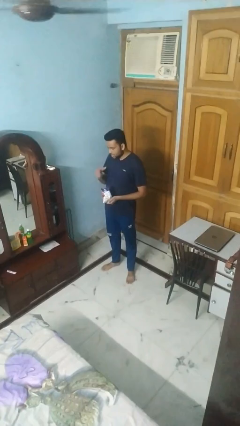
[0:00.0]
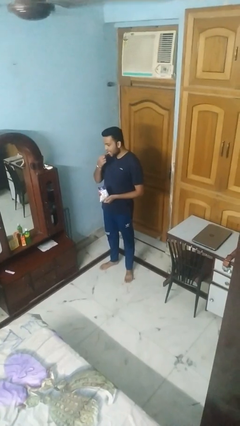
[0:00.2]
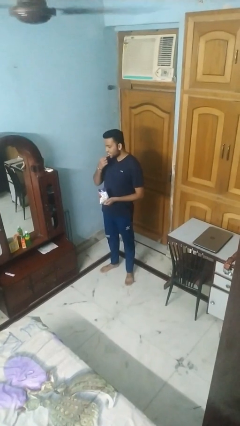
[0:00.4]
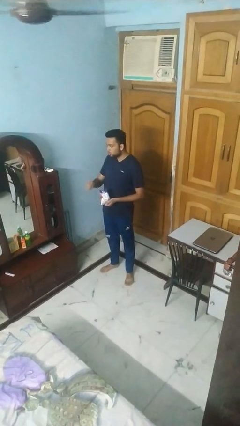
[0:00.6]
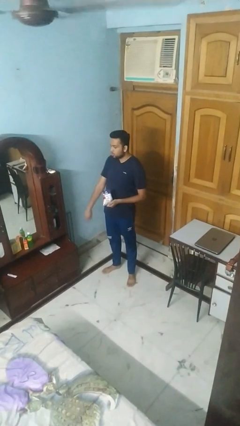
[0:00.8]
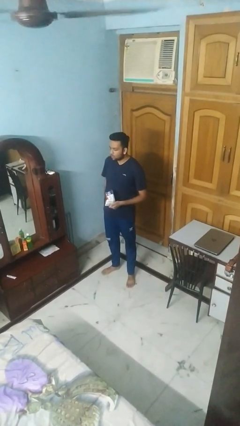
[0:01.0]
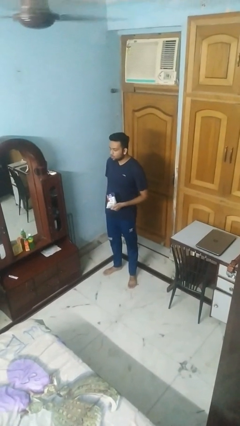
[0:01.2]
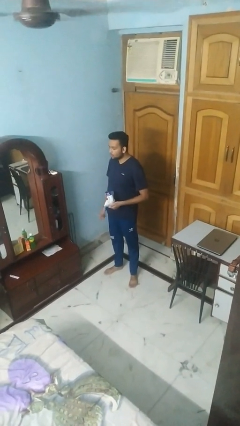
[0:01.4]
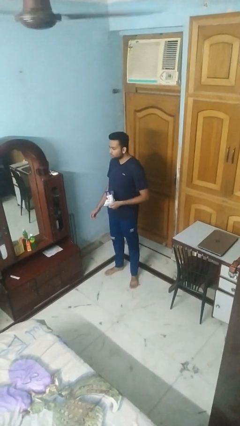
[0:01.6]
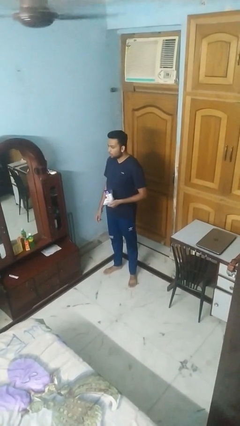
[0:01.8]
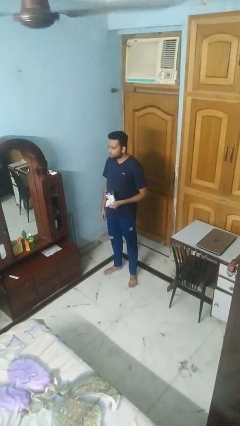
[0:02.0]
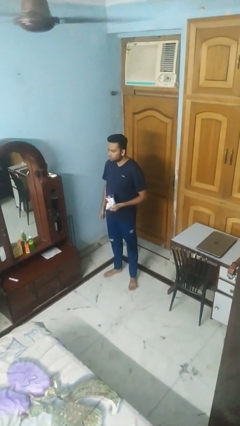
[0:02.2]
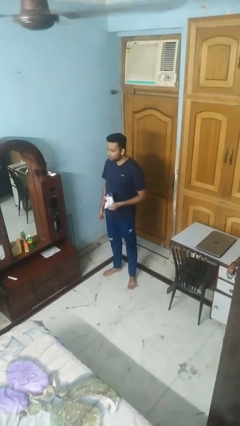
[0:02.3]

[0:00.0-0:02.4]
person eats snack from bag

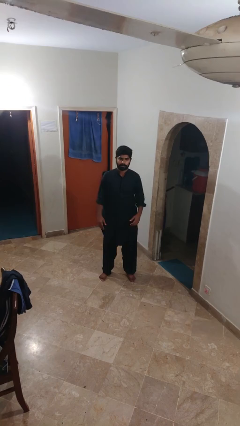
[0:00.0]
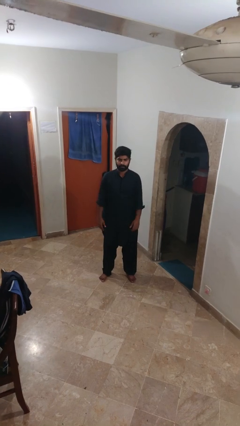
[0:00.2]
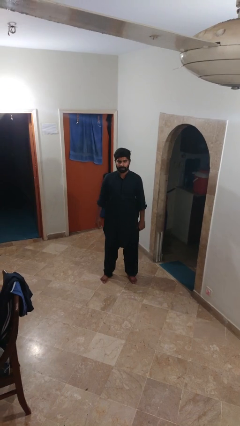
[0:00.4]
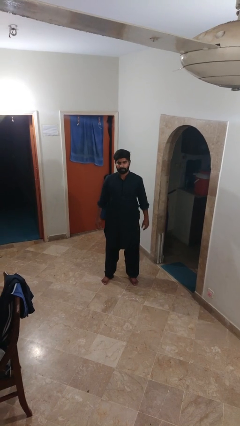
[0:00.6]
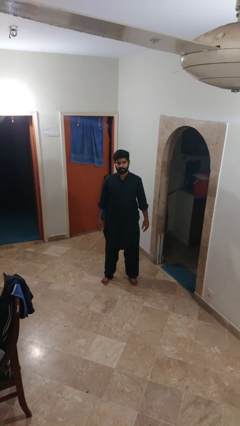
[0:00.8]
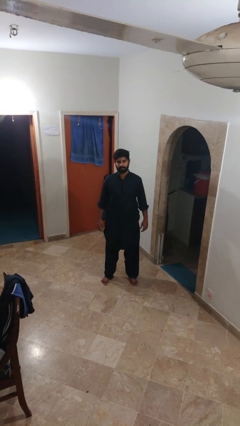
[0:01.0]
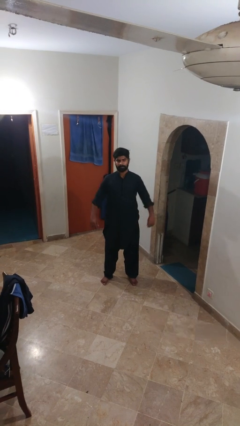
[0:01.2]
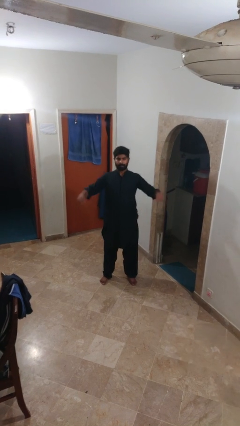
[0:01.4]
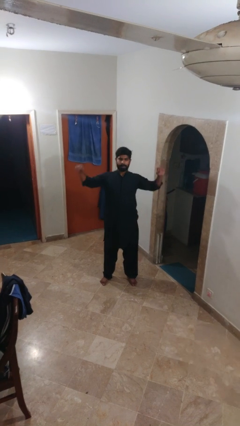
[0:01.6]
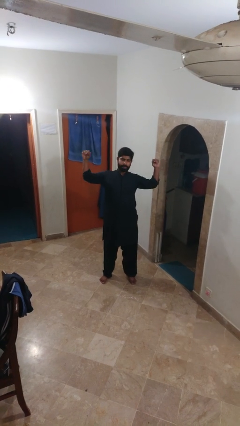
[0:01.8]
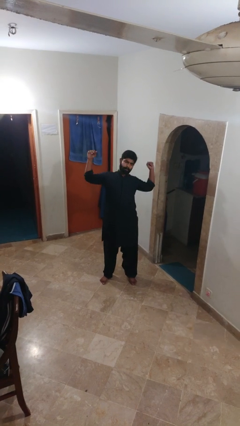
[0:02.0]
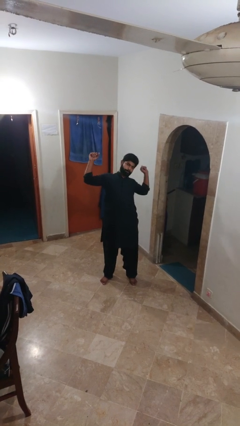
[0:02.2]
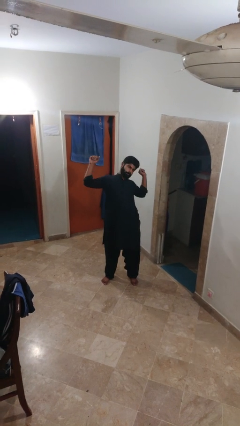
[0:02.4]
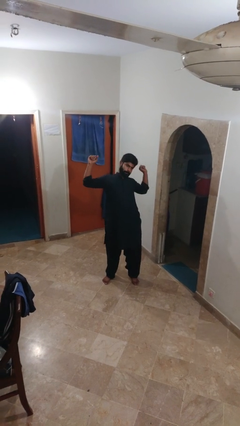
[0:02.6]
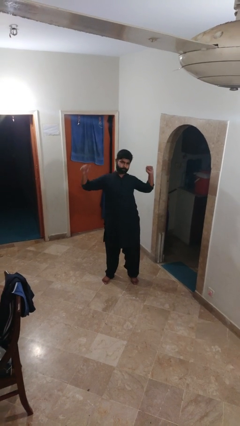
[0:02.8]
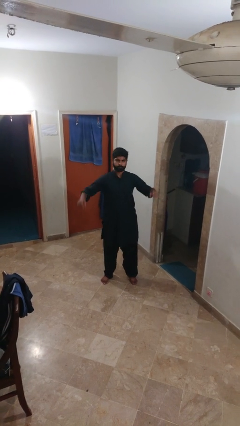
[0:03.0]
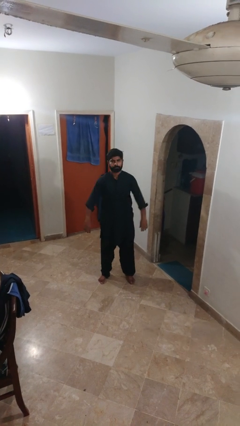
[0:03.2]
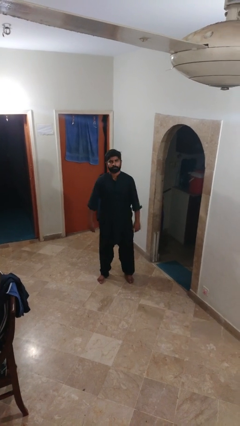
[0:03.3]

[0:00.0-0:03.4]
person stretches arms to side

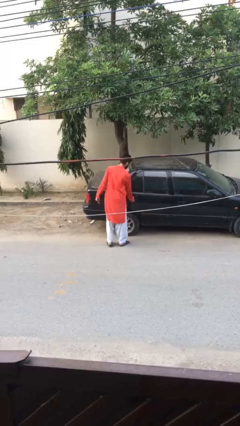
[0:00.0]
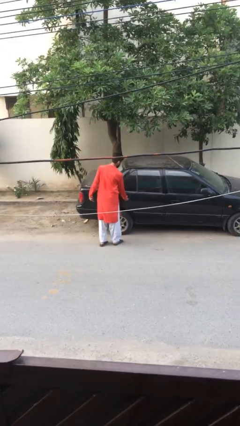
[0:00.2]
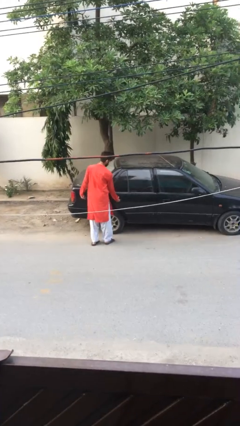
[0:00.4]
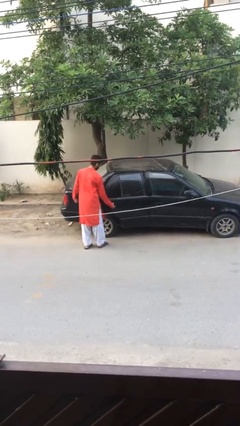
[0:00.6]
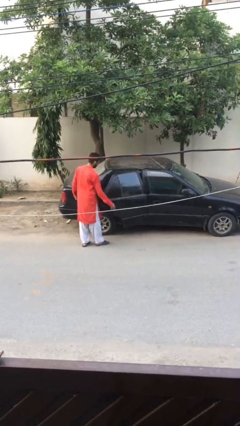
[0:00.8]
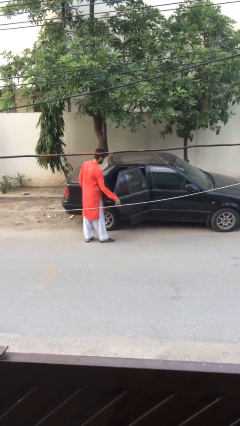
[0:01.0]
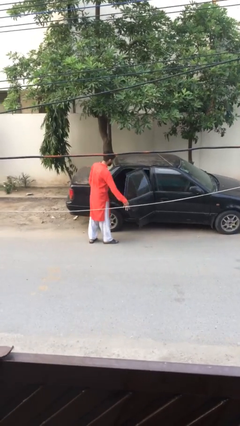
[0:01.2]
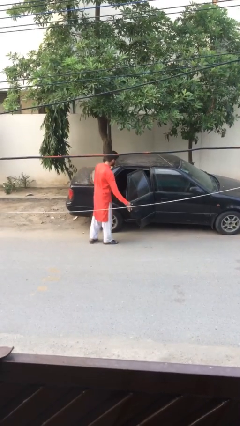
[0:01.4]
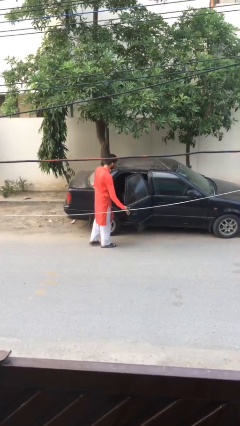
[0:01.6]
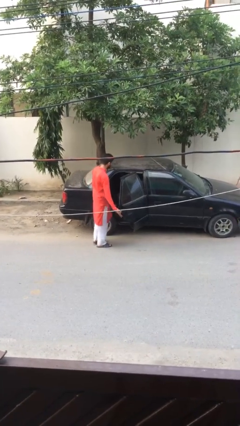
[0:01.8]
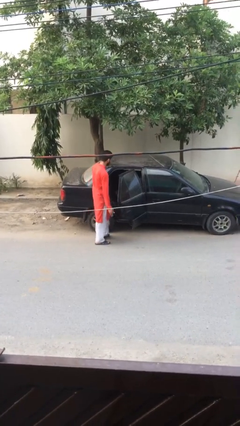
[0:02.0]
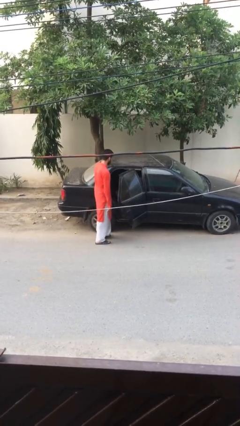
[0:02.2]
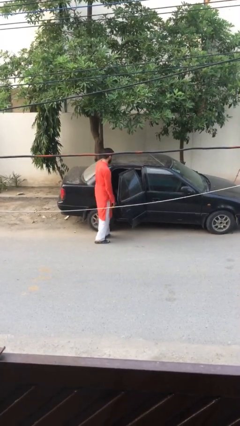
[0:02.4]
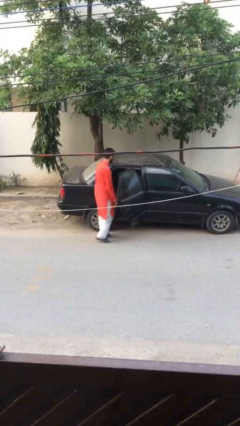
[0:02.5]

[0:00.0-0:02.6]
person opens car door

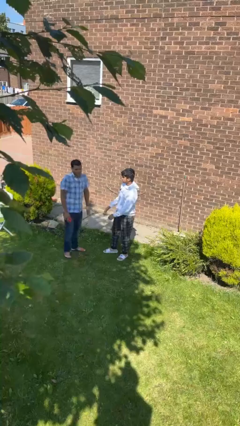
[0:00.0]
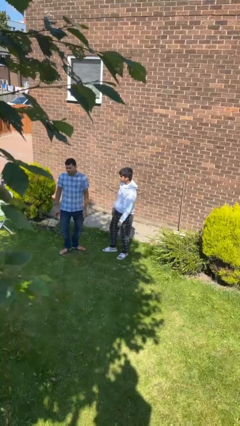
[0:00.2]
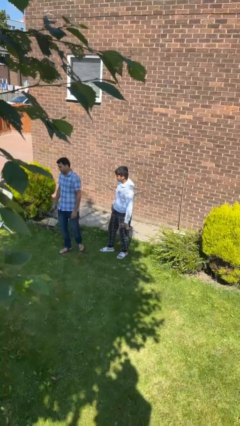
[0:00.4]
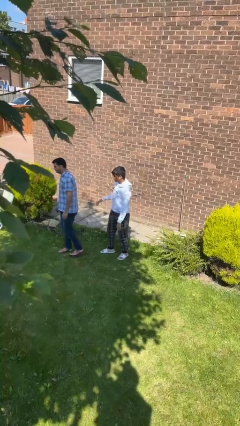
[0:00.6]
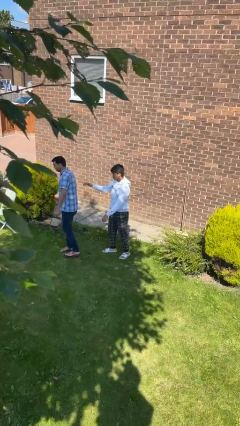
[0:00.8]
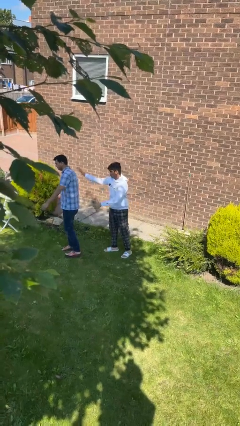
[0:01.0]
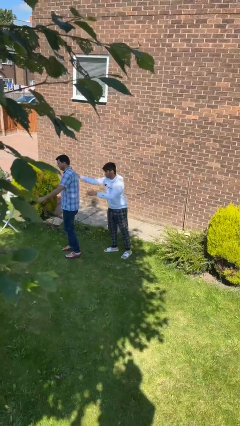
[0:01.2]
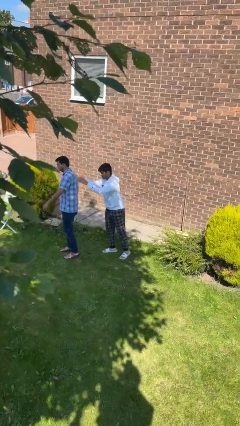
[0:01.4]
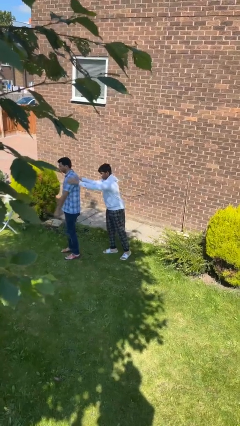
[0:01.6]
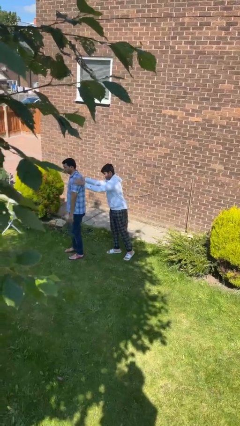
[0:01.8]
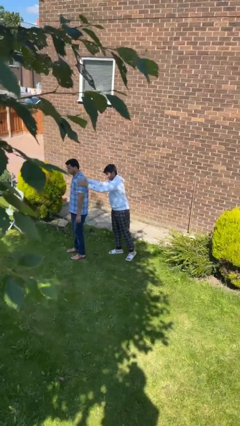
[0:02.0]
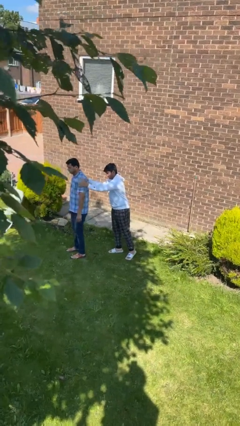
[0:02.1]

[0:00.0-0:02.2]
person grabs person by shoulder

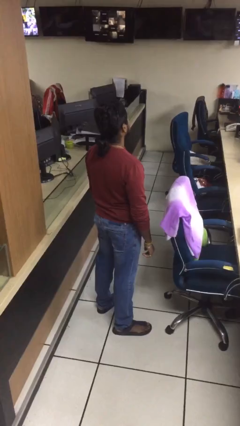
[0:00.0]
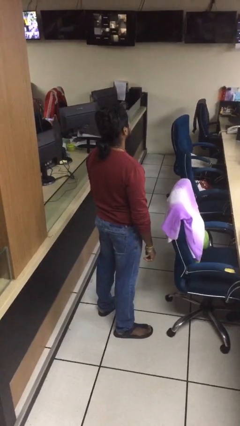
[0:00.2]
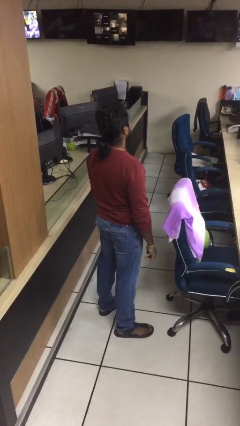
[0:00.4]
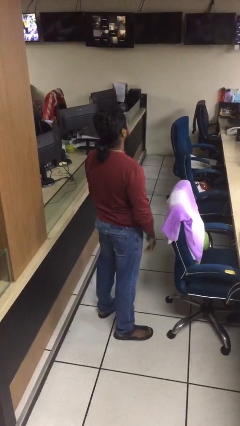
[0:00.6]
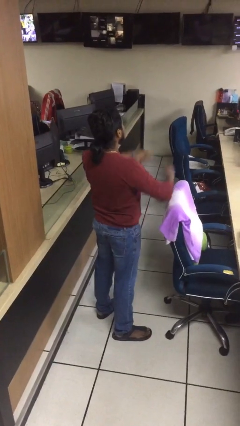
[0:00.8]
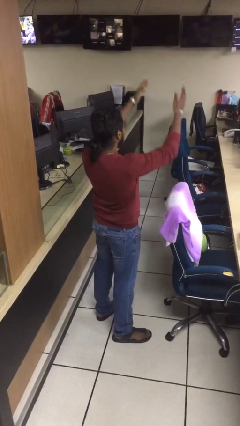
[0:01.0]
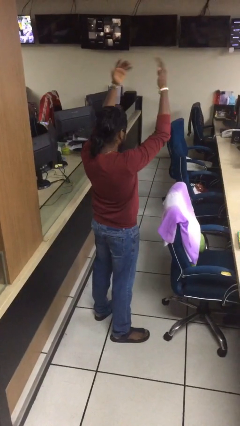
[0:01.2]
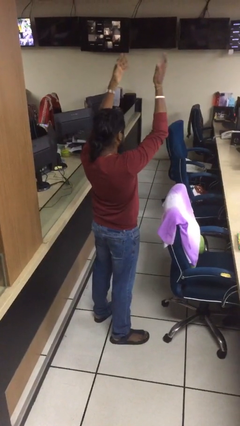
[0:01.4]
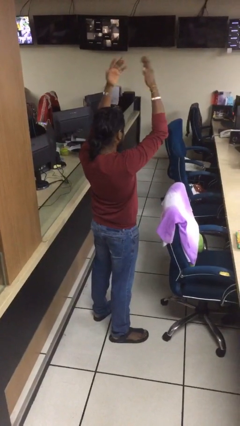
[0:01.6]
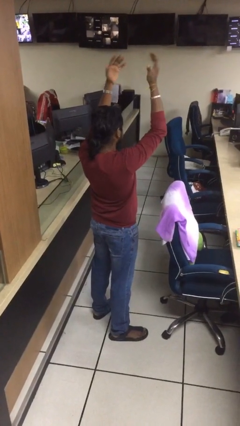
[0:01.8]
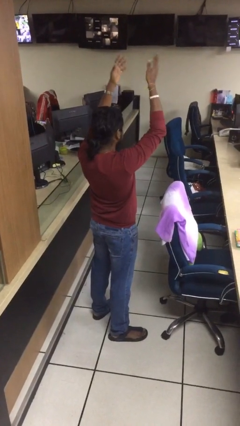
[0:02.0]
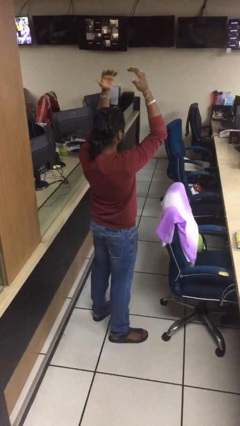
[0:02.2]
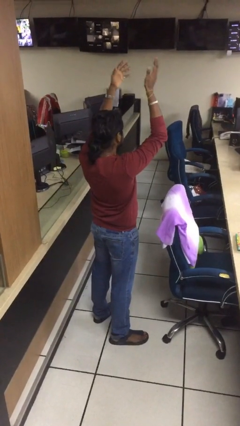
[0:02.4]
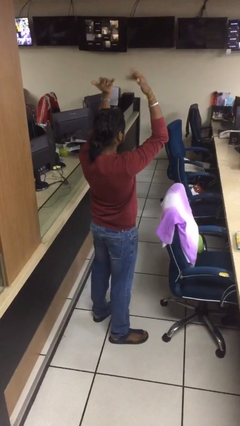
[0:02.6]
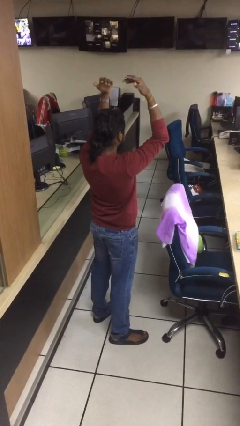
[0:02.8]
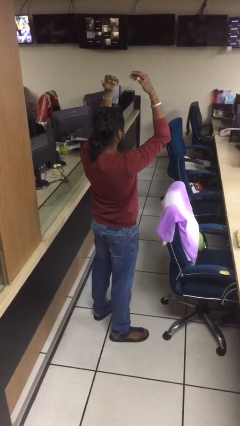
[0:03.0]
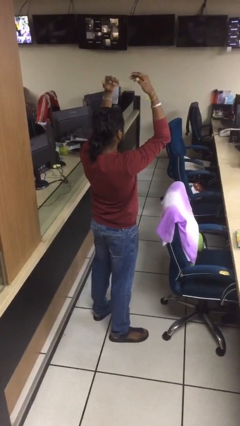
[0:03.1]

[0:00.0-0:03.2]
person gestures come here

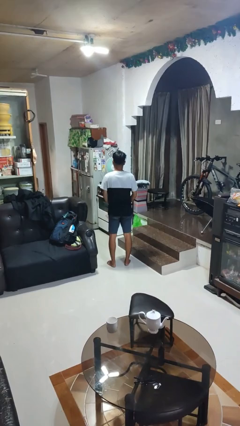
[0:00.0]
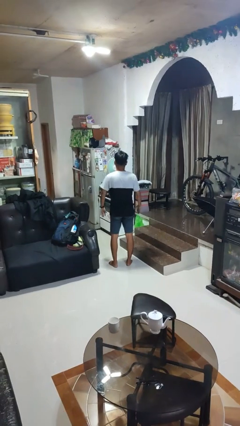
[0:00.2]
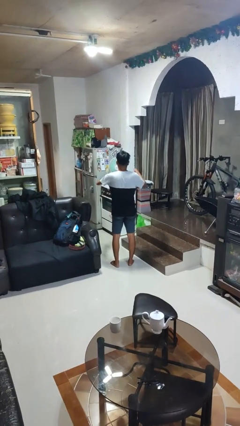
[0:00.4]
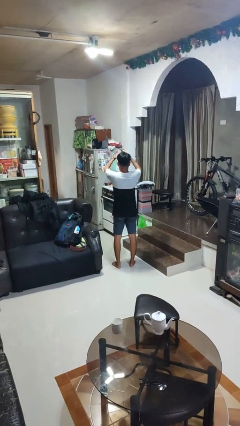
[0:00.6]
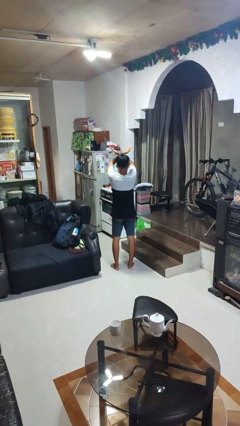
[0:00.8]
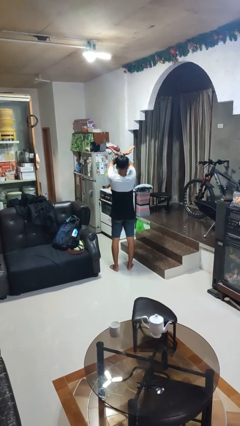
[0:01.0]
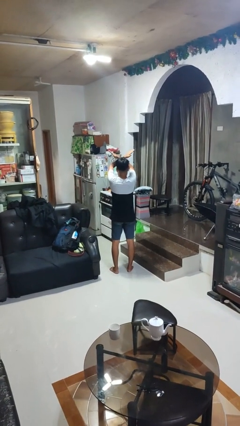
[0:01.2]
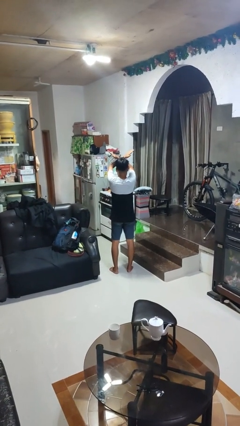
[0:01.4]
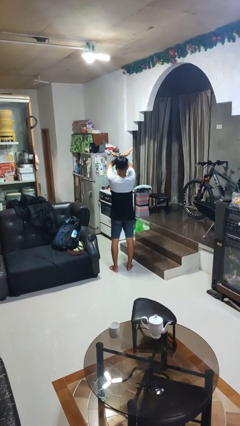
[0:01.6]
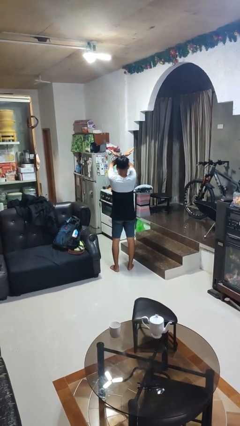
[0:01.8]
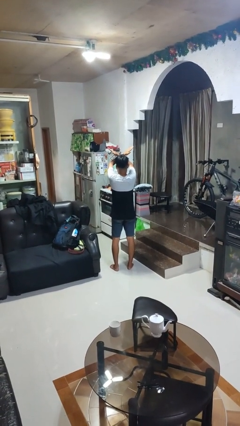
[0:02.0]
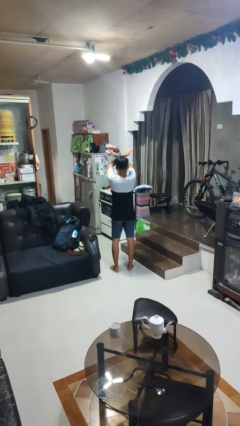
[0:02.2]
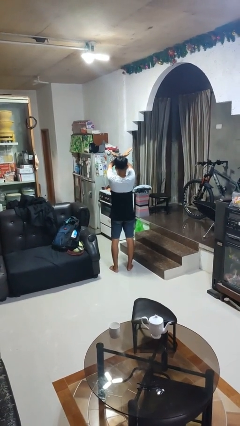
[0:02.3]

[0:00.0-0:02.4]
person gestures arms x

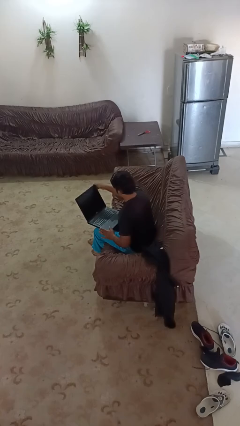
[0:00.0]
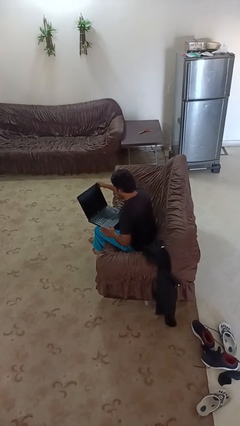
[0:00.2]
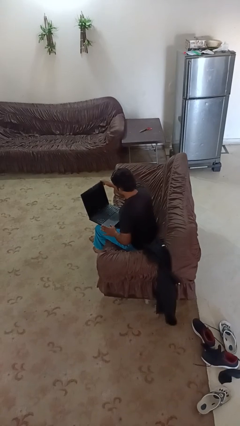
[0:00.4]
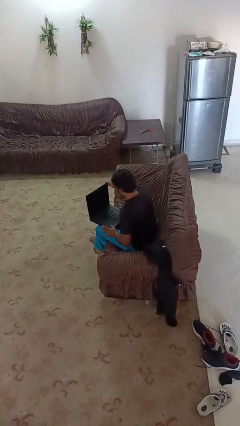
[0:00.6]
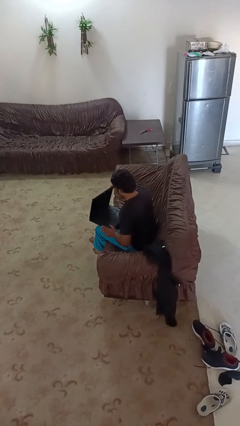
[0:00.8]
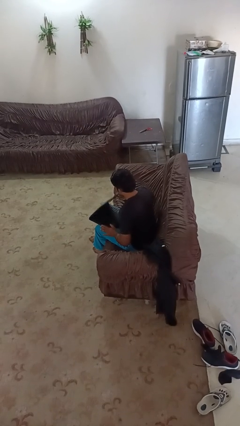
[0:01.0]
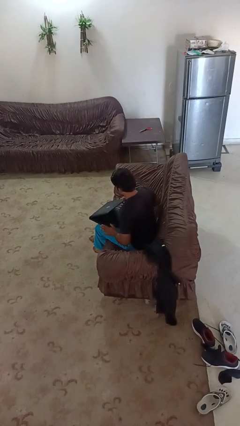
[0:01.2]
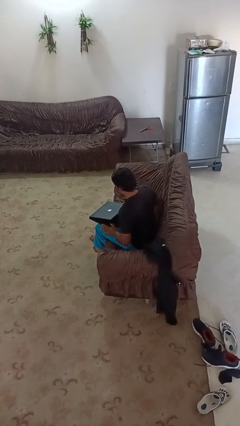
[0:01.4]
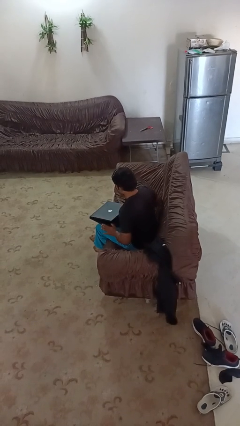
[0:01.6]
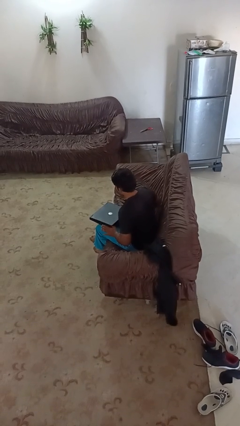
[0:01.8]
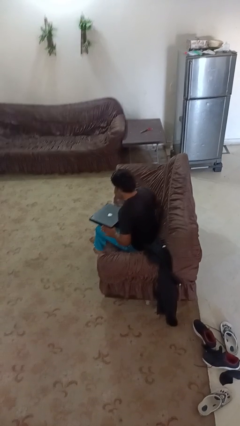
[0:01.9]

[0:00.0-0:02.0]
person closes laptop
